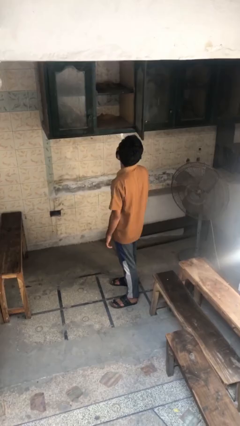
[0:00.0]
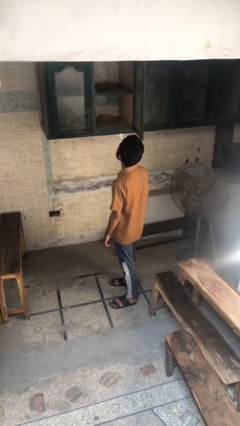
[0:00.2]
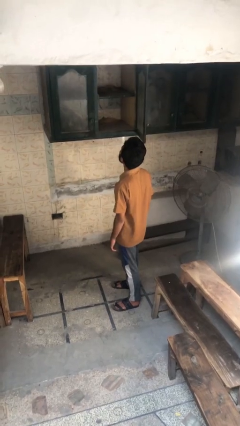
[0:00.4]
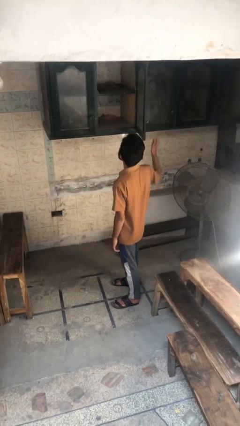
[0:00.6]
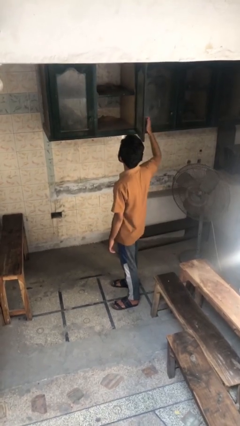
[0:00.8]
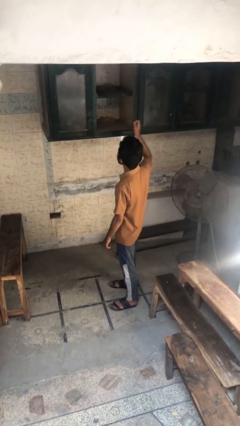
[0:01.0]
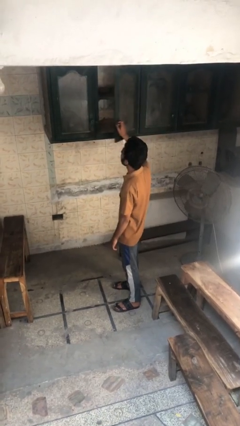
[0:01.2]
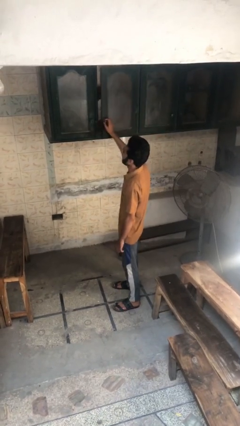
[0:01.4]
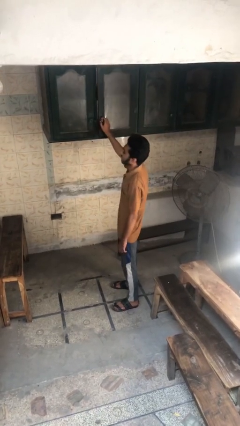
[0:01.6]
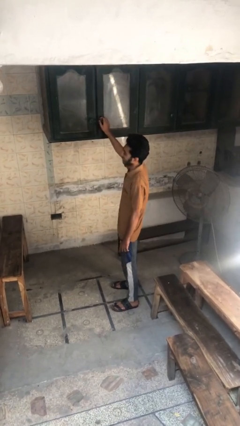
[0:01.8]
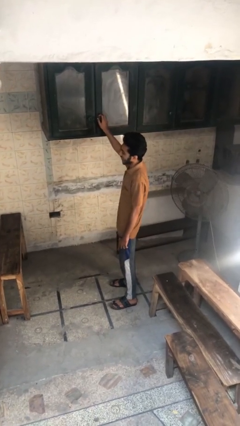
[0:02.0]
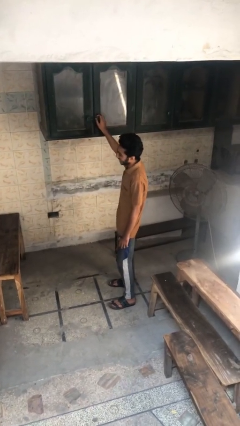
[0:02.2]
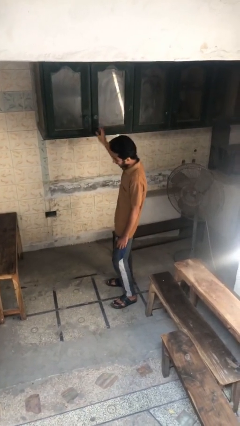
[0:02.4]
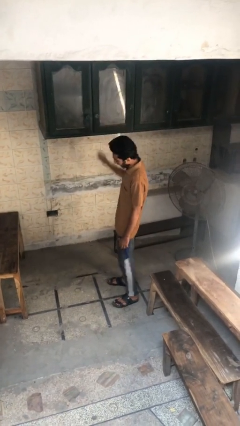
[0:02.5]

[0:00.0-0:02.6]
person closes cabinet

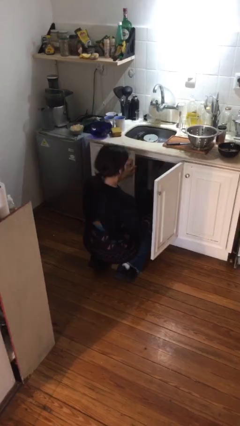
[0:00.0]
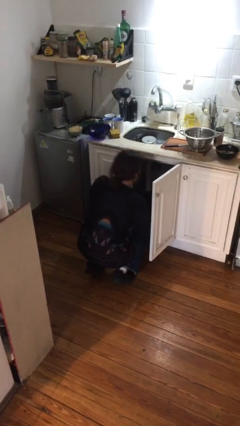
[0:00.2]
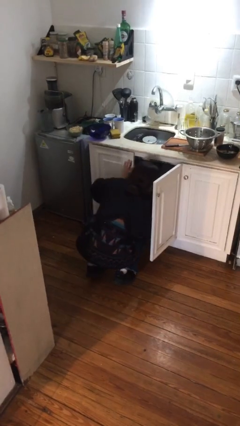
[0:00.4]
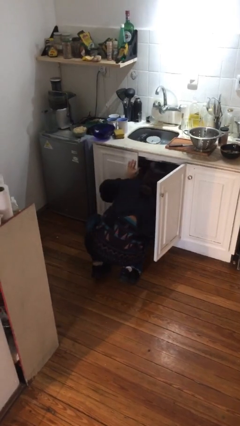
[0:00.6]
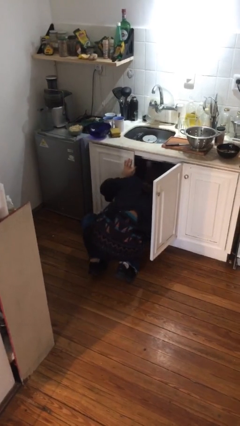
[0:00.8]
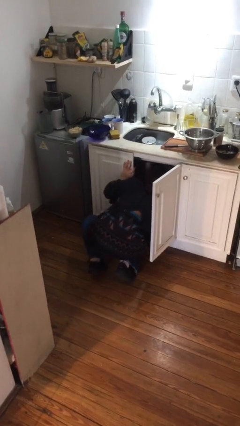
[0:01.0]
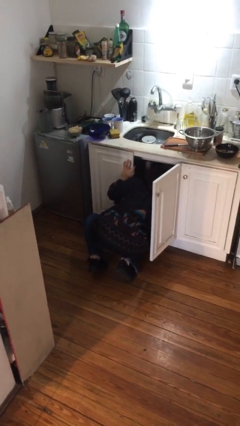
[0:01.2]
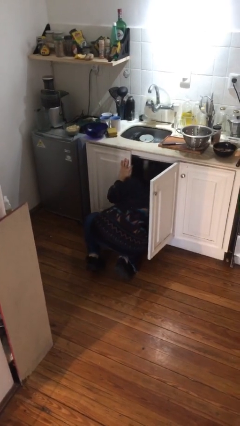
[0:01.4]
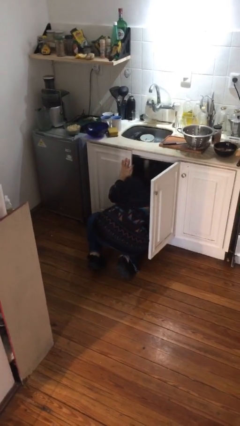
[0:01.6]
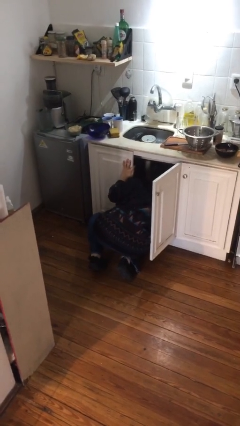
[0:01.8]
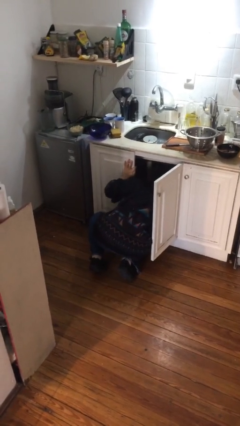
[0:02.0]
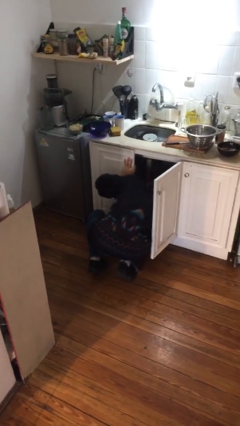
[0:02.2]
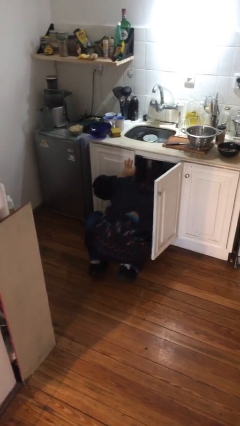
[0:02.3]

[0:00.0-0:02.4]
person searches in cabinet

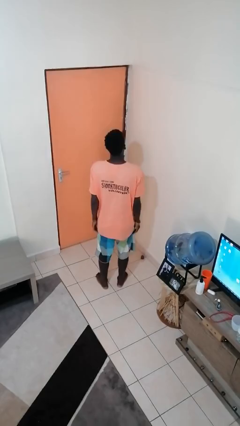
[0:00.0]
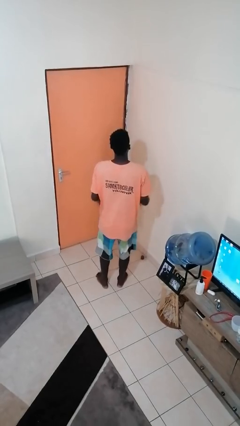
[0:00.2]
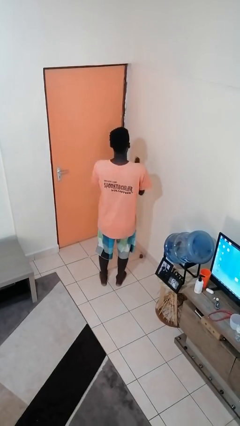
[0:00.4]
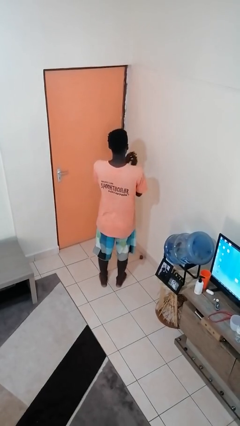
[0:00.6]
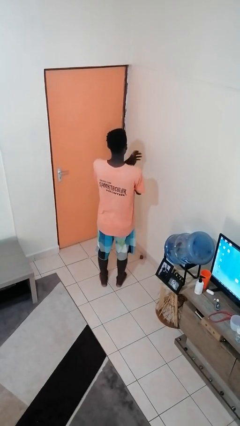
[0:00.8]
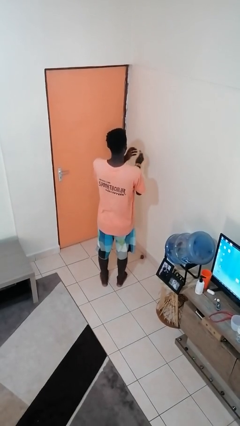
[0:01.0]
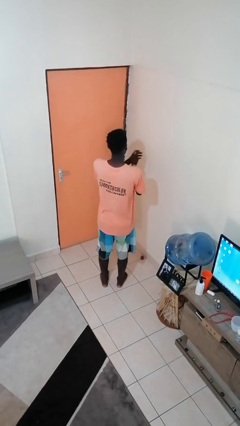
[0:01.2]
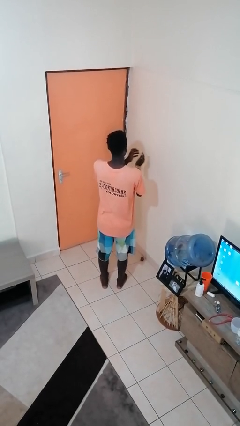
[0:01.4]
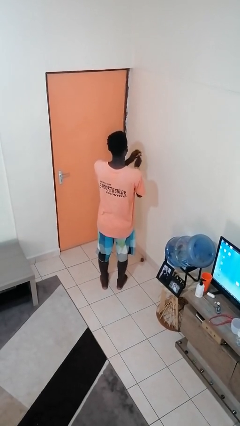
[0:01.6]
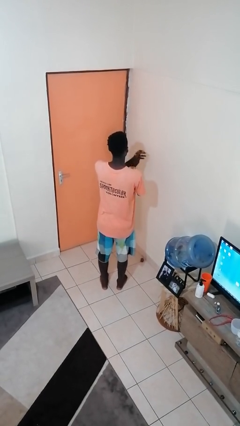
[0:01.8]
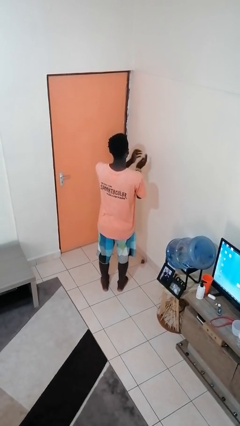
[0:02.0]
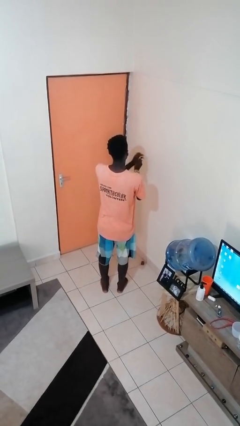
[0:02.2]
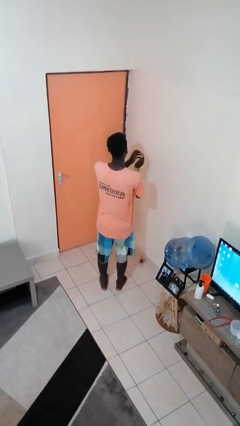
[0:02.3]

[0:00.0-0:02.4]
person claps hands

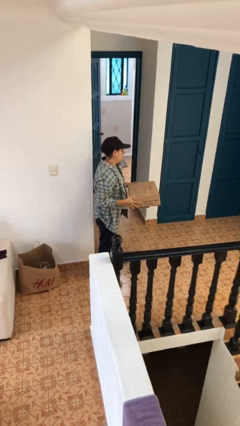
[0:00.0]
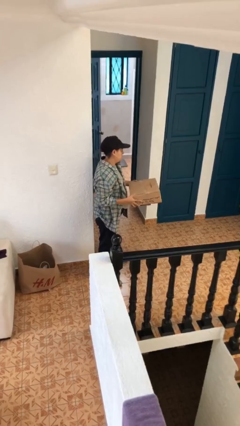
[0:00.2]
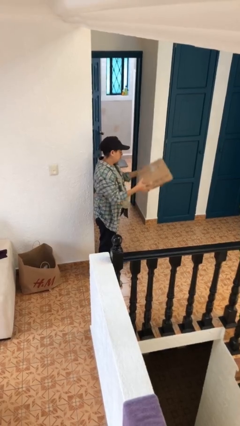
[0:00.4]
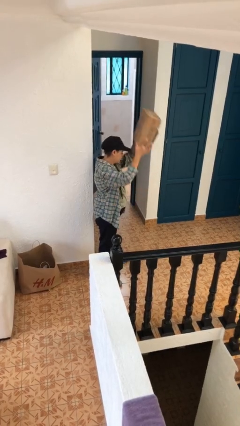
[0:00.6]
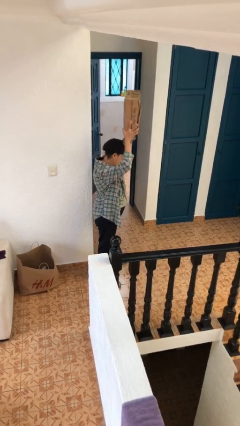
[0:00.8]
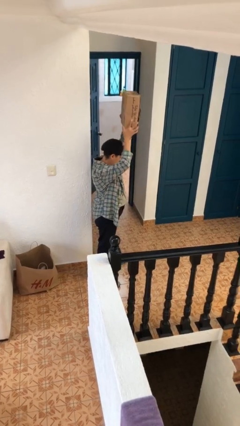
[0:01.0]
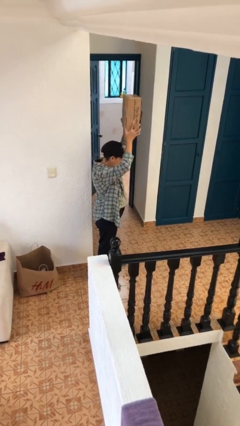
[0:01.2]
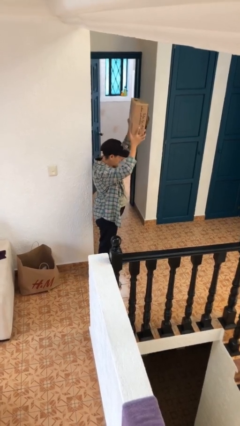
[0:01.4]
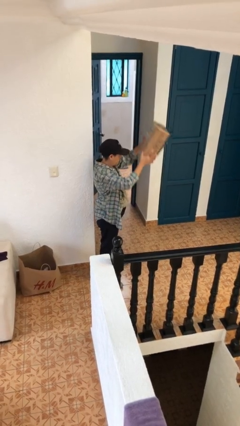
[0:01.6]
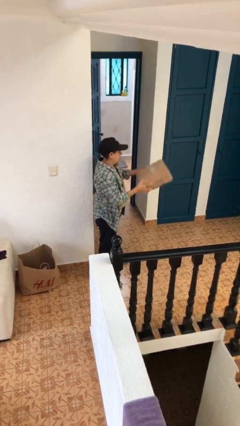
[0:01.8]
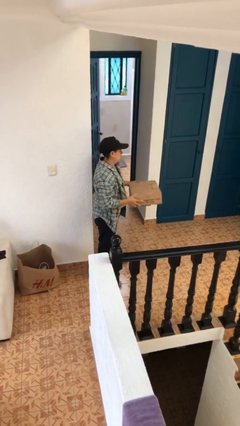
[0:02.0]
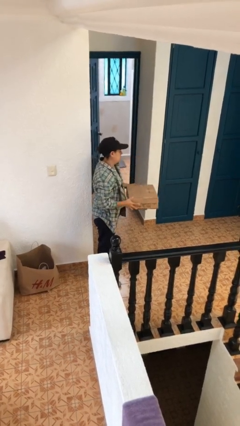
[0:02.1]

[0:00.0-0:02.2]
person holds object above head

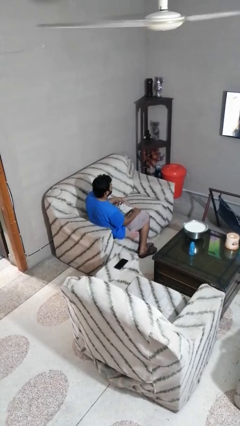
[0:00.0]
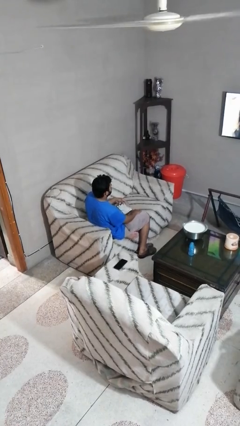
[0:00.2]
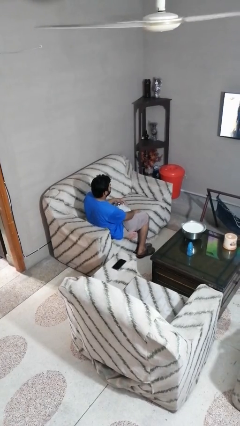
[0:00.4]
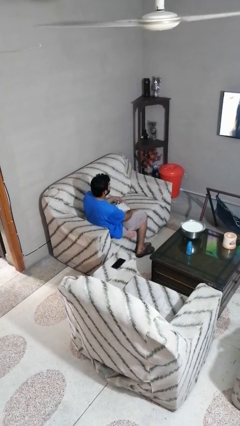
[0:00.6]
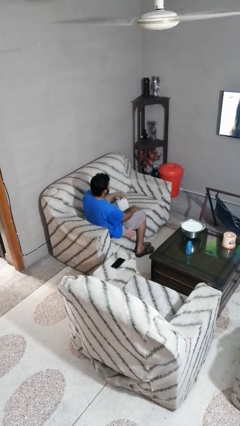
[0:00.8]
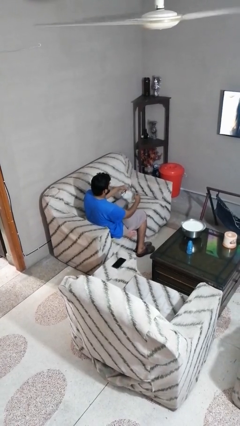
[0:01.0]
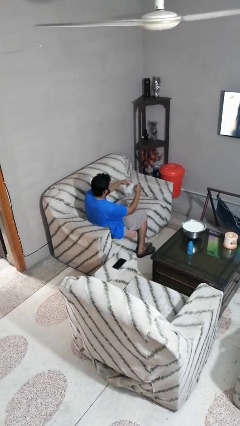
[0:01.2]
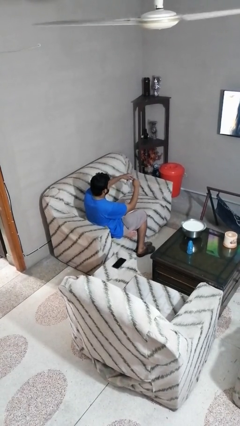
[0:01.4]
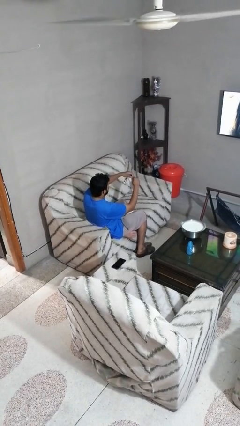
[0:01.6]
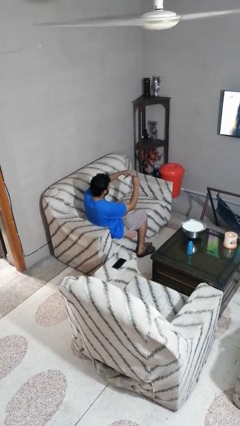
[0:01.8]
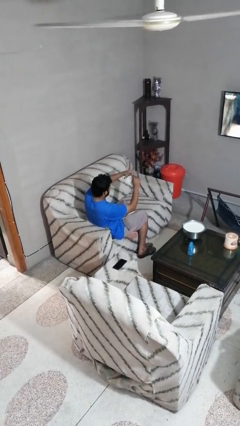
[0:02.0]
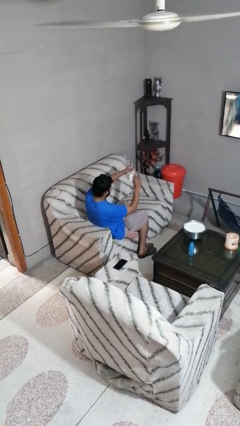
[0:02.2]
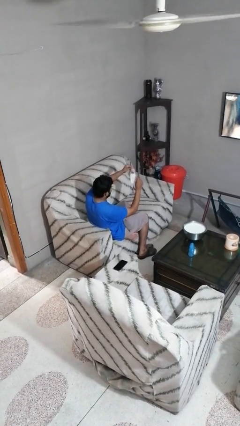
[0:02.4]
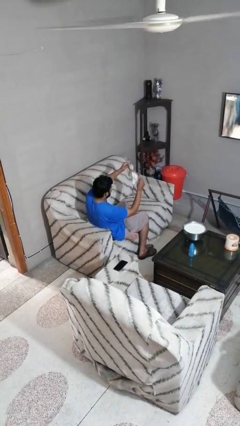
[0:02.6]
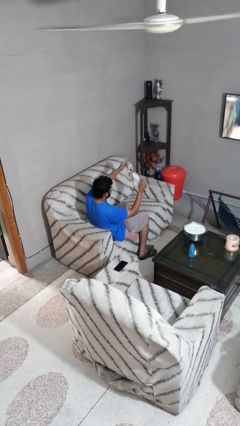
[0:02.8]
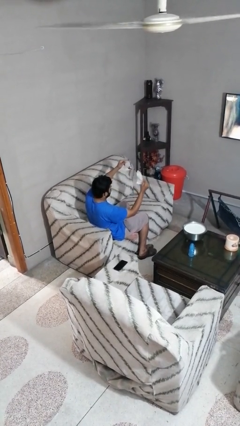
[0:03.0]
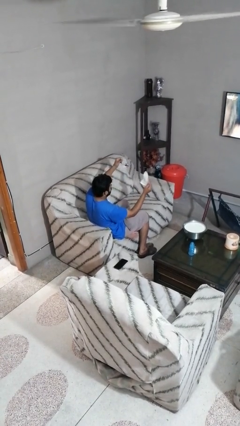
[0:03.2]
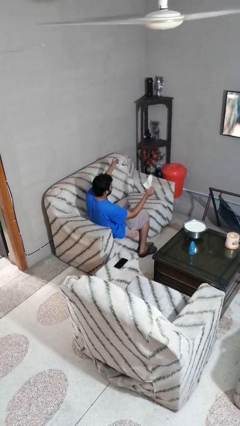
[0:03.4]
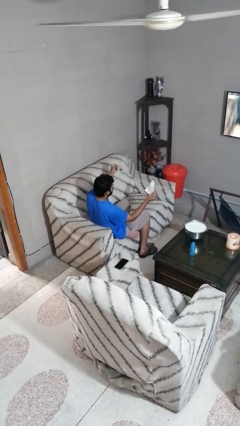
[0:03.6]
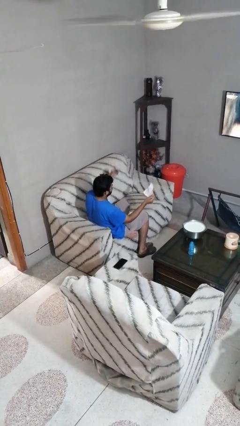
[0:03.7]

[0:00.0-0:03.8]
person tears paper

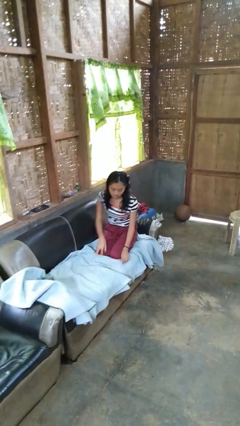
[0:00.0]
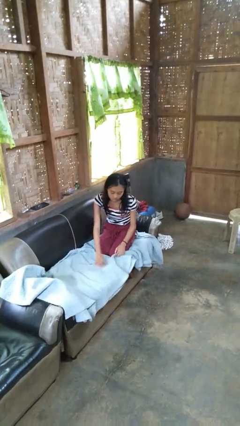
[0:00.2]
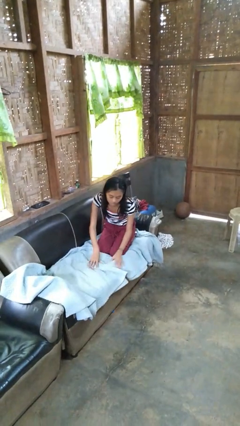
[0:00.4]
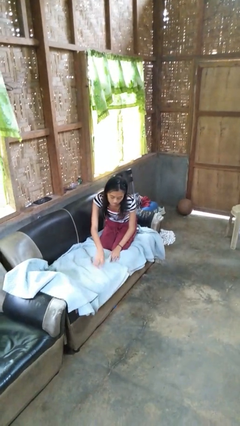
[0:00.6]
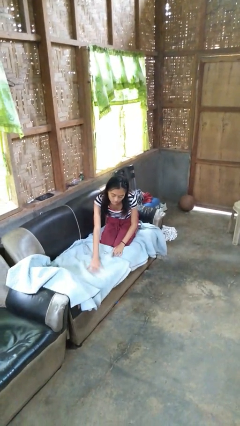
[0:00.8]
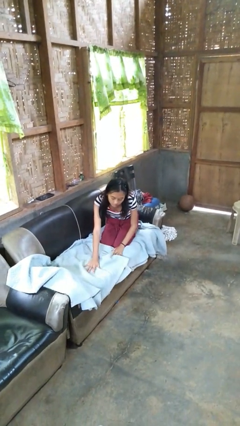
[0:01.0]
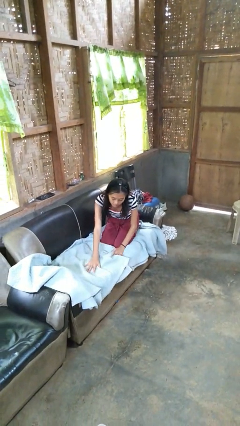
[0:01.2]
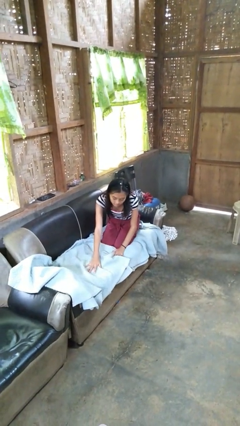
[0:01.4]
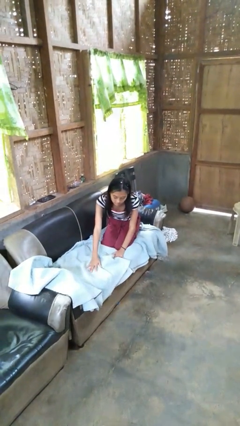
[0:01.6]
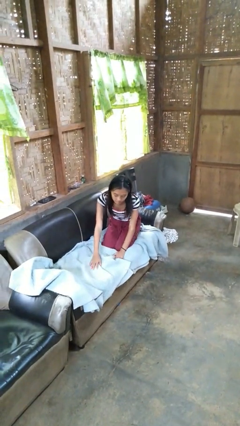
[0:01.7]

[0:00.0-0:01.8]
person searches in couch

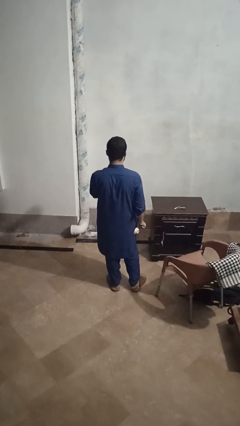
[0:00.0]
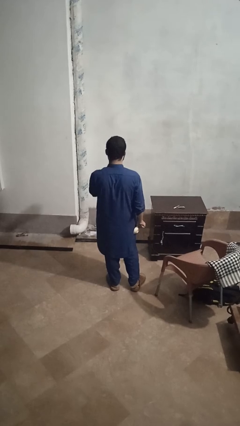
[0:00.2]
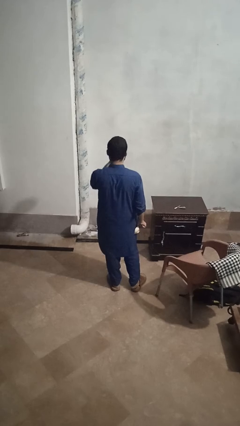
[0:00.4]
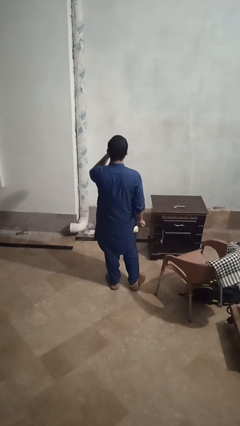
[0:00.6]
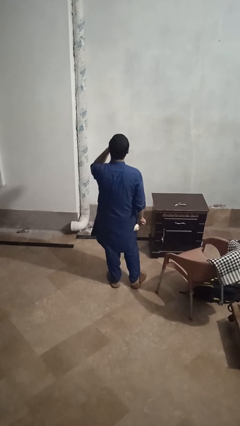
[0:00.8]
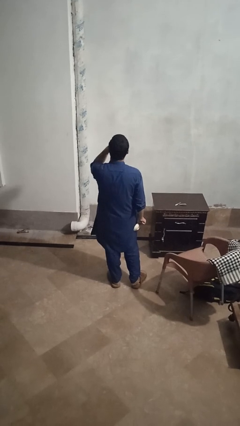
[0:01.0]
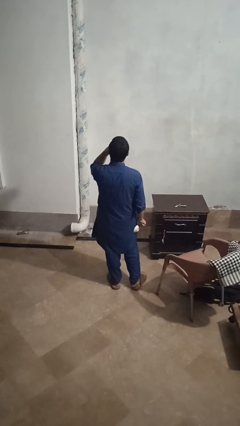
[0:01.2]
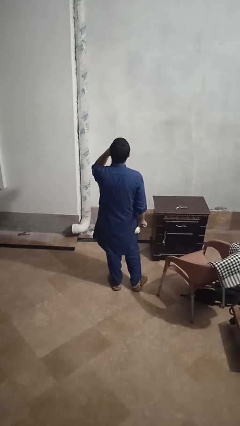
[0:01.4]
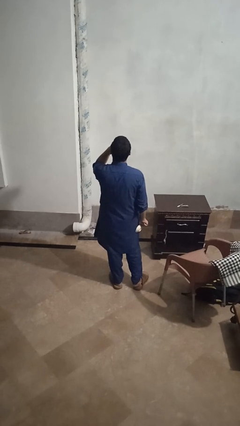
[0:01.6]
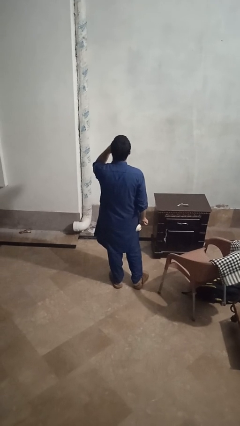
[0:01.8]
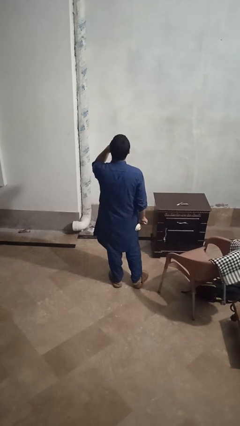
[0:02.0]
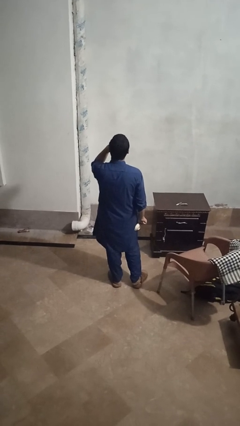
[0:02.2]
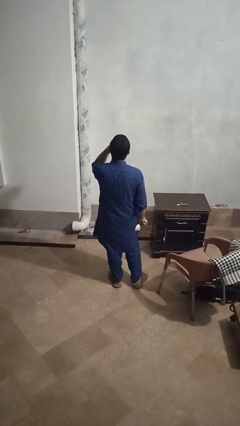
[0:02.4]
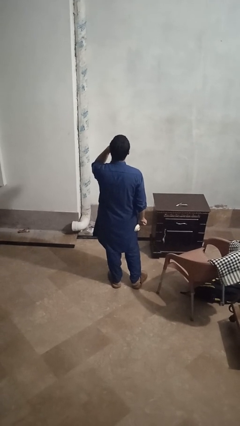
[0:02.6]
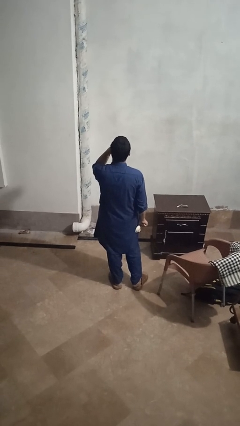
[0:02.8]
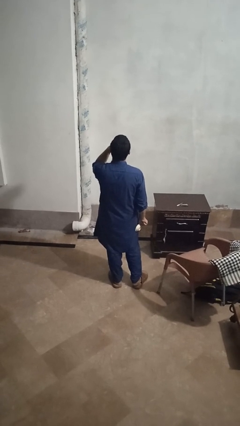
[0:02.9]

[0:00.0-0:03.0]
person drinks from beverage can
